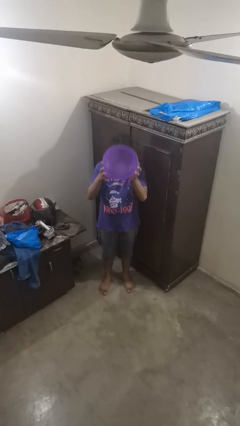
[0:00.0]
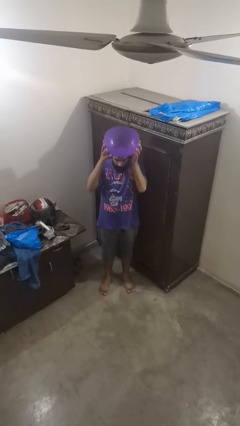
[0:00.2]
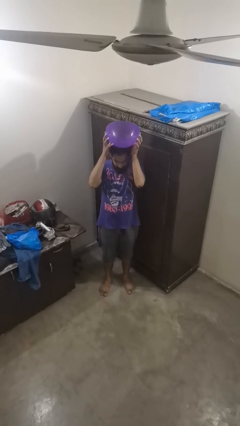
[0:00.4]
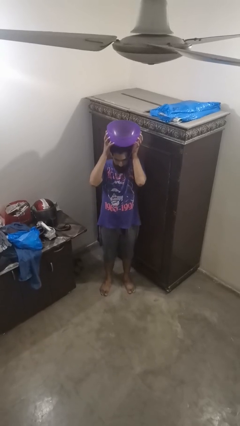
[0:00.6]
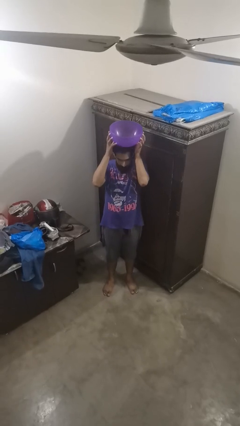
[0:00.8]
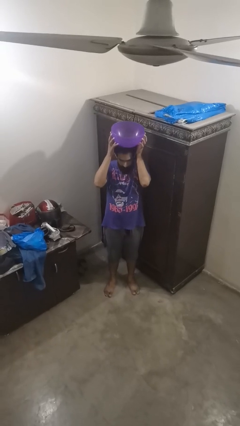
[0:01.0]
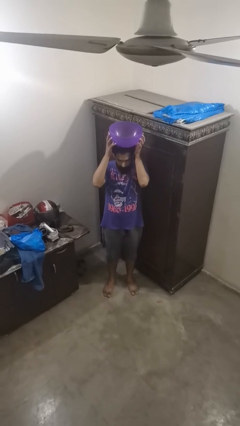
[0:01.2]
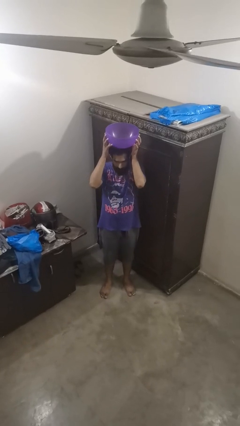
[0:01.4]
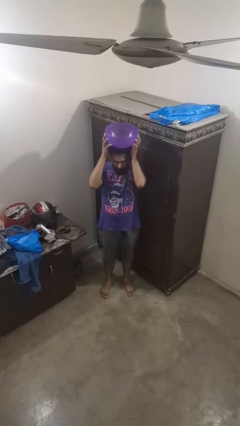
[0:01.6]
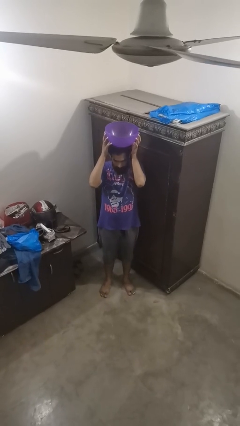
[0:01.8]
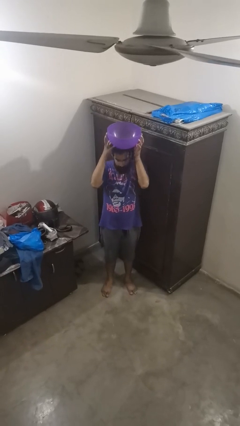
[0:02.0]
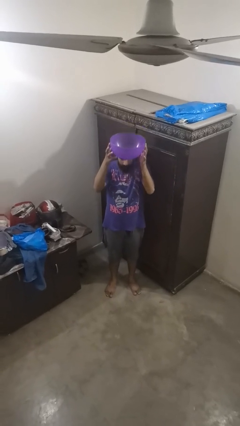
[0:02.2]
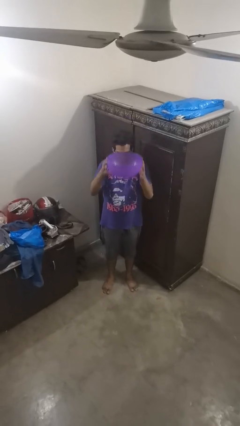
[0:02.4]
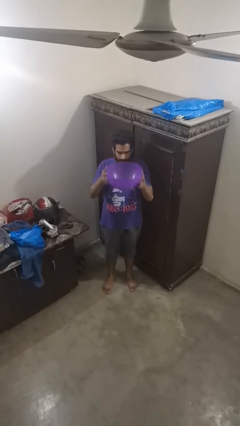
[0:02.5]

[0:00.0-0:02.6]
person holds object above head

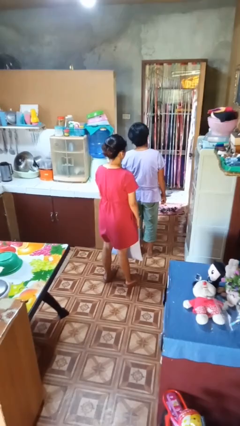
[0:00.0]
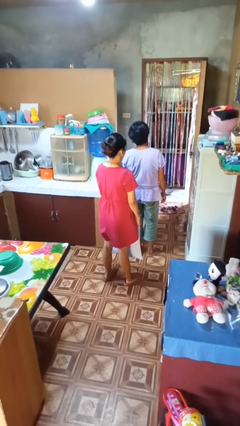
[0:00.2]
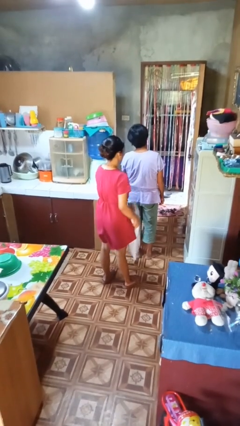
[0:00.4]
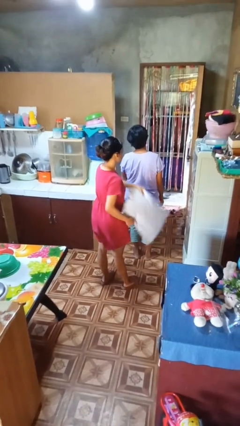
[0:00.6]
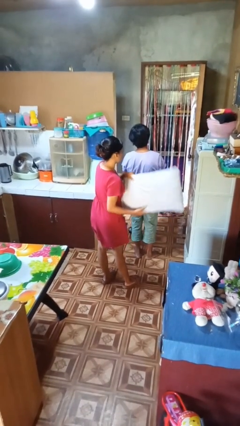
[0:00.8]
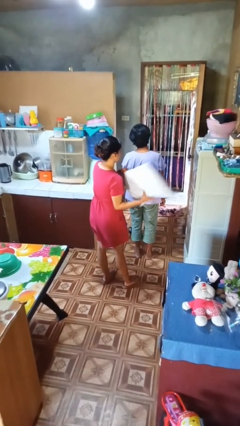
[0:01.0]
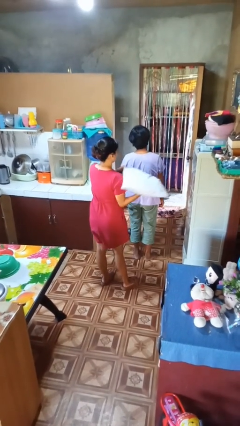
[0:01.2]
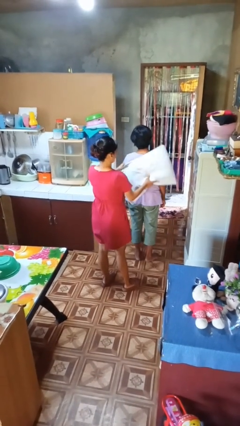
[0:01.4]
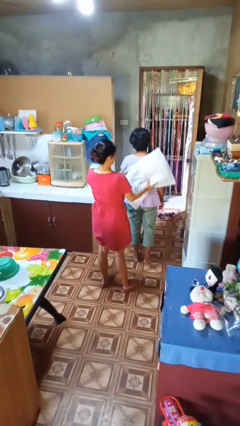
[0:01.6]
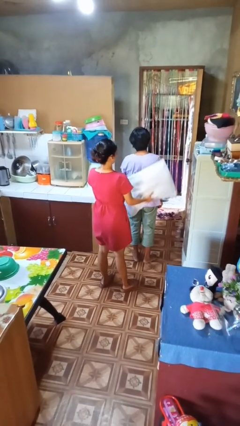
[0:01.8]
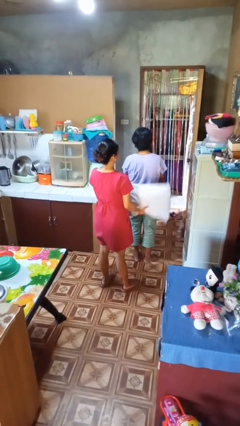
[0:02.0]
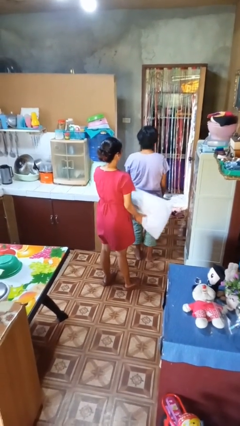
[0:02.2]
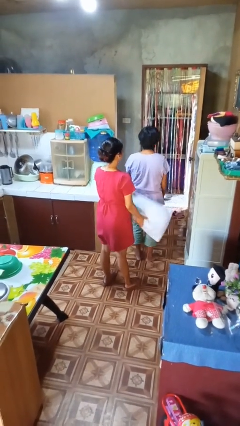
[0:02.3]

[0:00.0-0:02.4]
person hits person with pillow

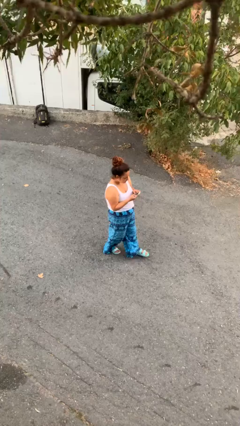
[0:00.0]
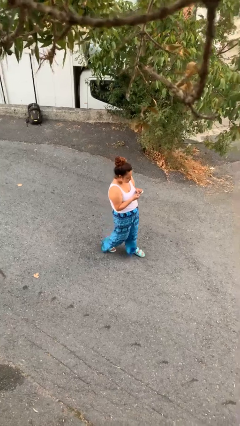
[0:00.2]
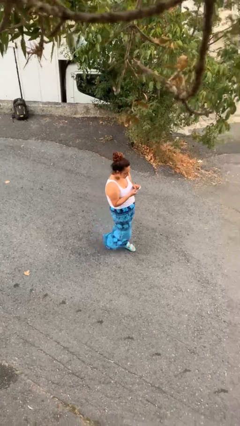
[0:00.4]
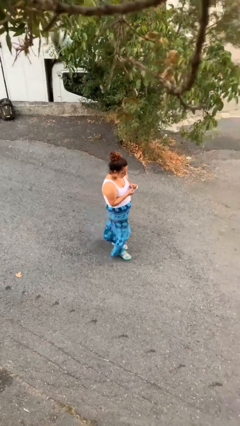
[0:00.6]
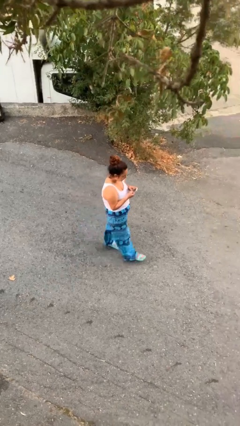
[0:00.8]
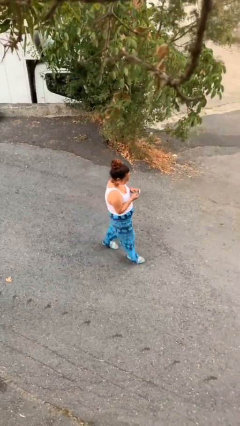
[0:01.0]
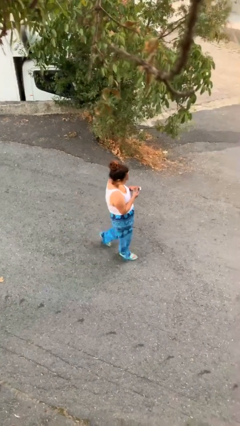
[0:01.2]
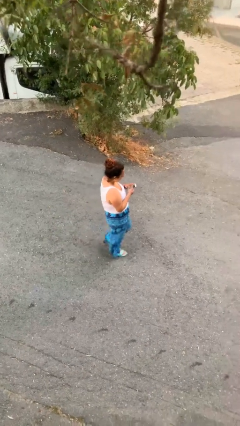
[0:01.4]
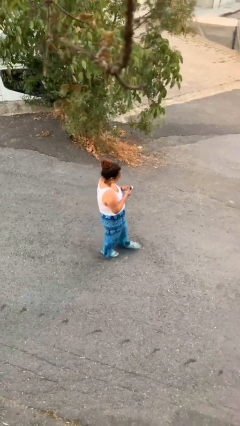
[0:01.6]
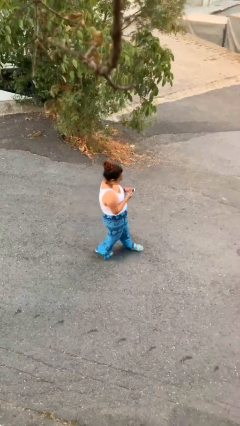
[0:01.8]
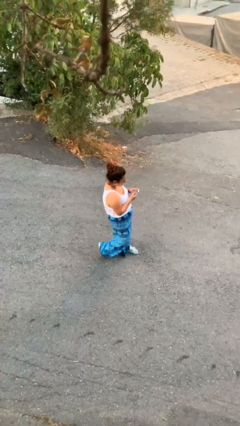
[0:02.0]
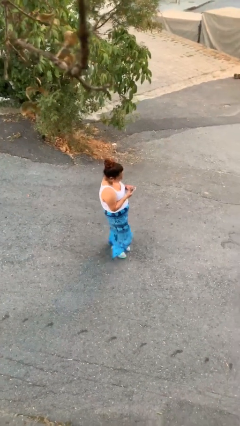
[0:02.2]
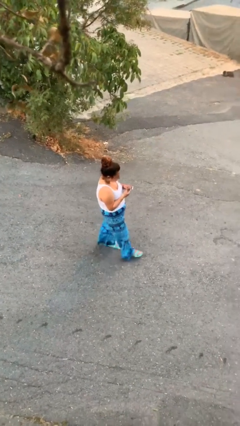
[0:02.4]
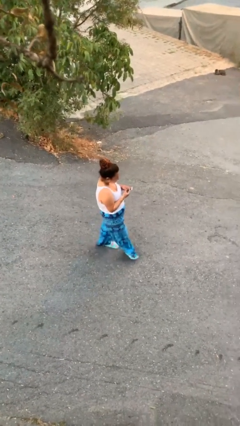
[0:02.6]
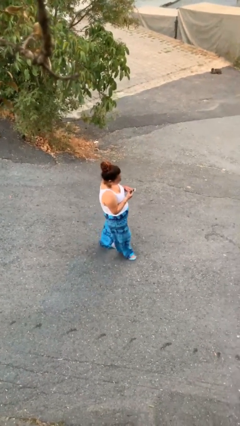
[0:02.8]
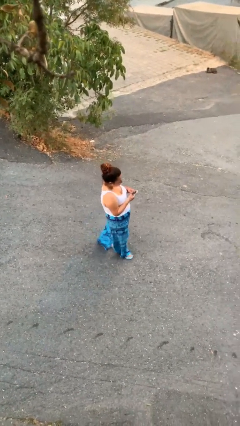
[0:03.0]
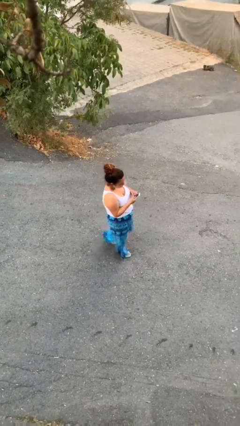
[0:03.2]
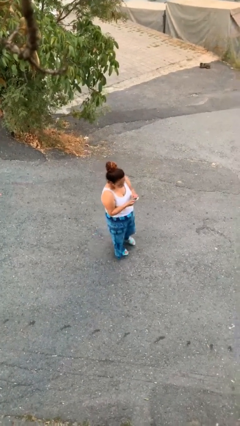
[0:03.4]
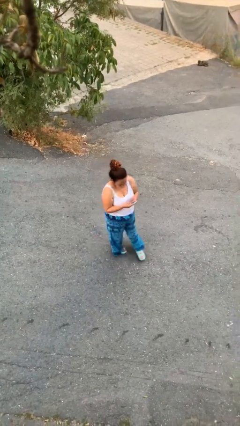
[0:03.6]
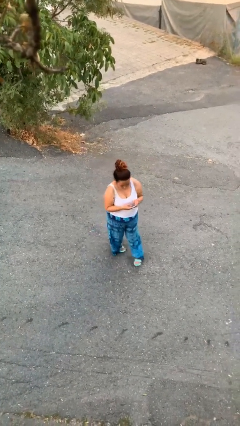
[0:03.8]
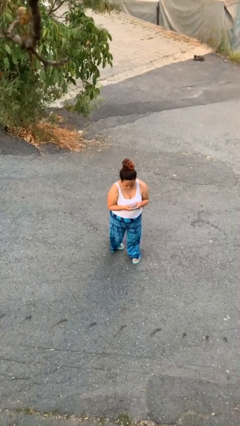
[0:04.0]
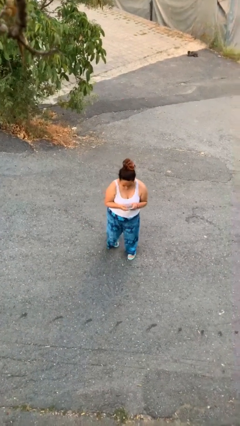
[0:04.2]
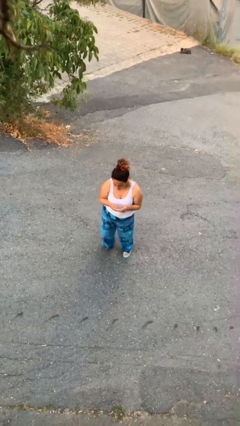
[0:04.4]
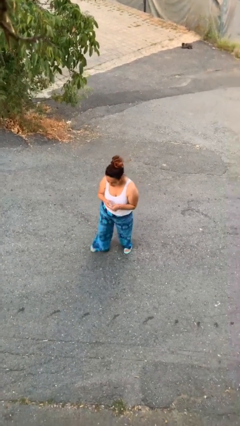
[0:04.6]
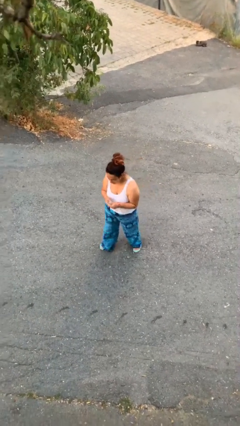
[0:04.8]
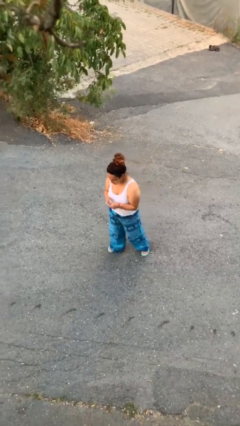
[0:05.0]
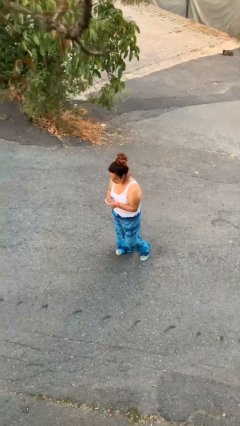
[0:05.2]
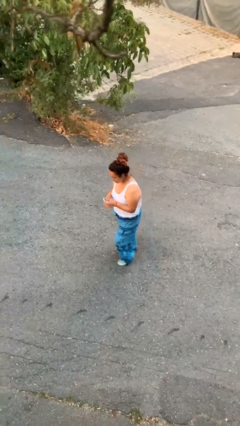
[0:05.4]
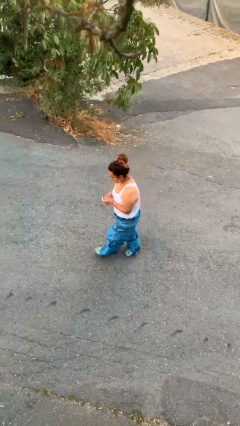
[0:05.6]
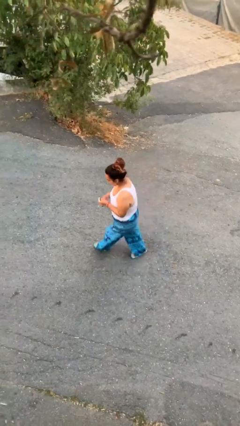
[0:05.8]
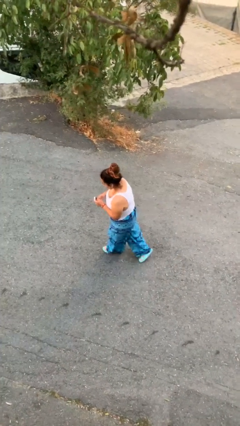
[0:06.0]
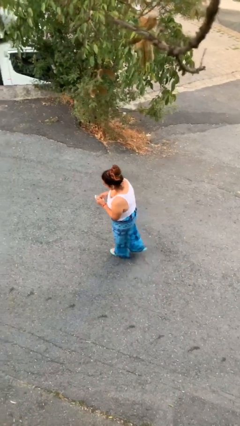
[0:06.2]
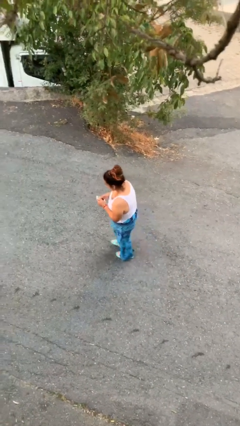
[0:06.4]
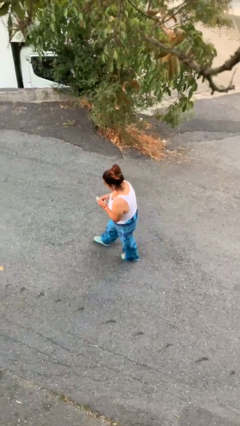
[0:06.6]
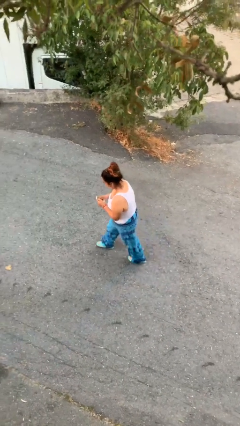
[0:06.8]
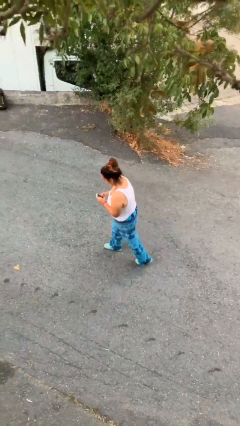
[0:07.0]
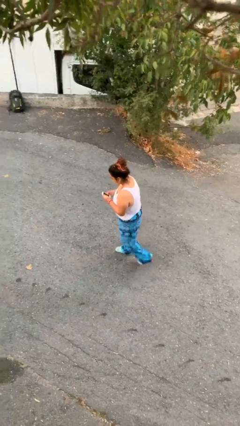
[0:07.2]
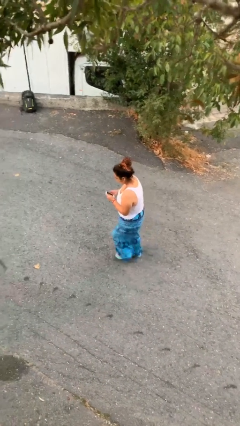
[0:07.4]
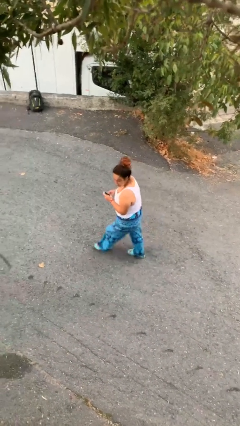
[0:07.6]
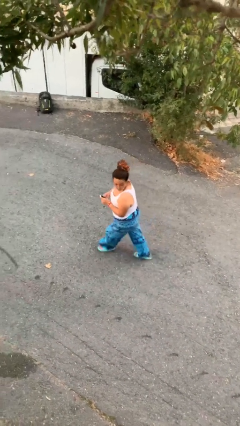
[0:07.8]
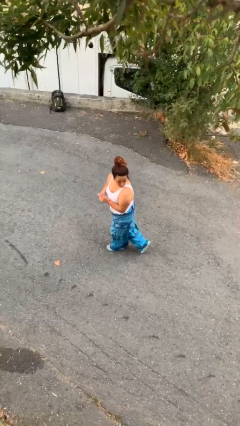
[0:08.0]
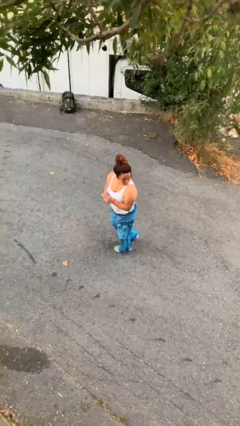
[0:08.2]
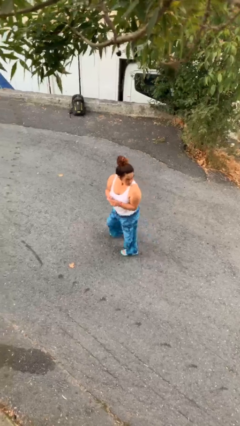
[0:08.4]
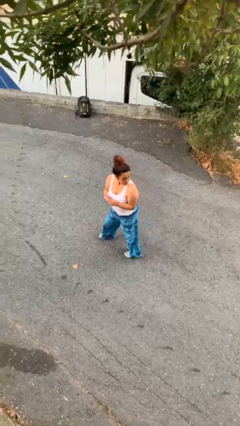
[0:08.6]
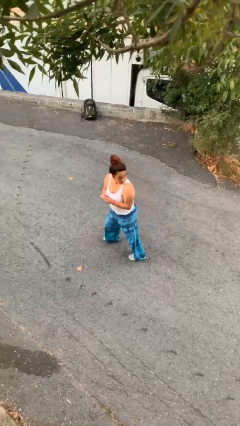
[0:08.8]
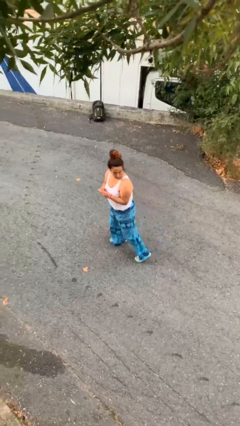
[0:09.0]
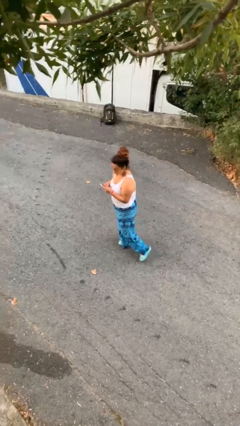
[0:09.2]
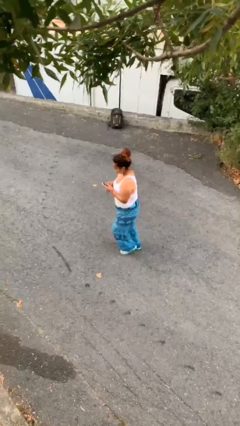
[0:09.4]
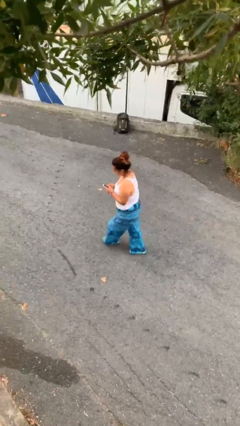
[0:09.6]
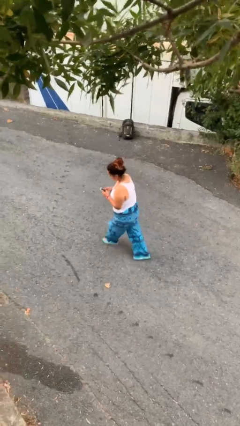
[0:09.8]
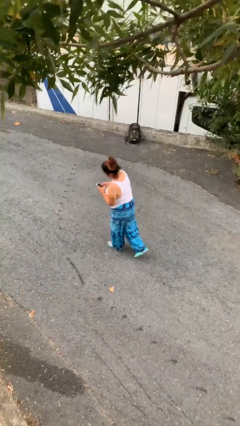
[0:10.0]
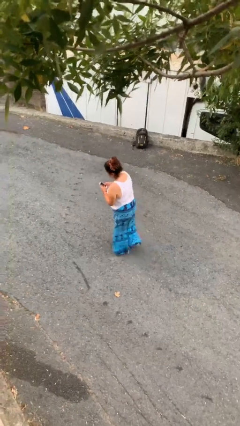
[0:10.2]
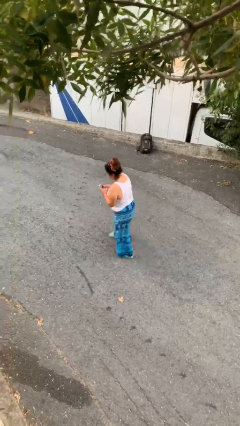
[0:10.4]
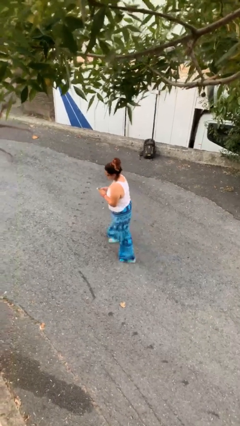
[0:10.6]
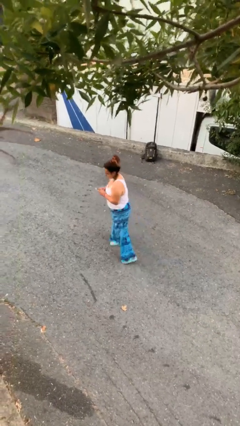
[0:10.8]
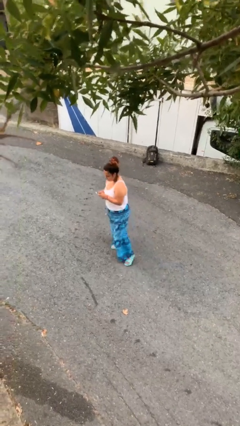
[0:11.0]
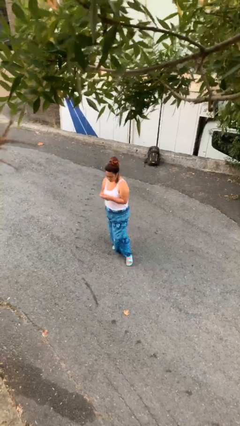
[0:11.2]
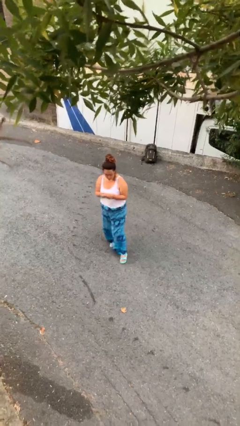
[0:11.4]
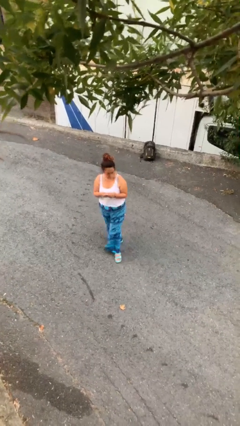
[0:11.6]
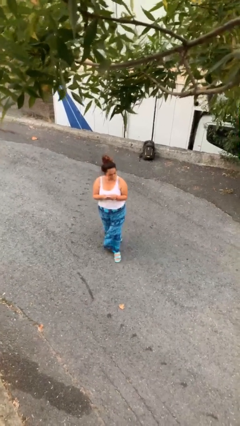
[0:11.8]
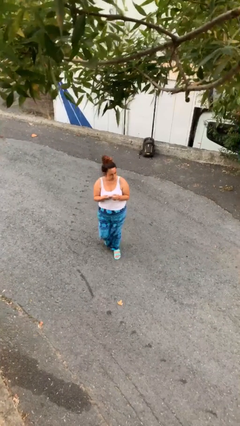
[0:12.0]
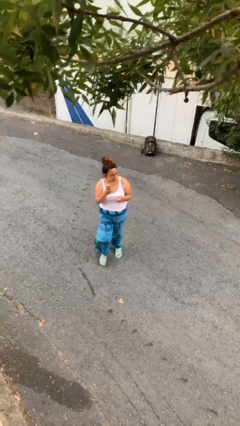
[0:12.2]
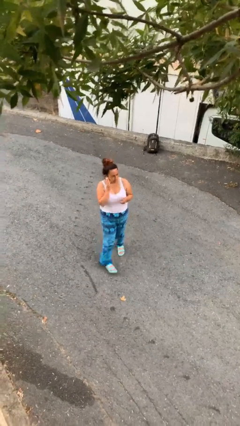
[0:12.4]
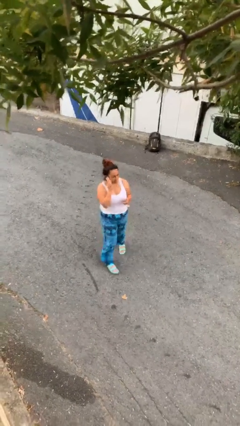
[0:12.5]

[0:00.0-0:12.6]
person texts on phone

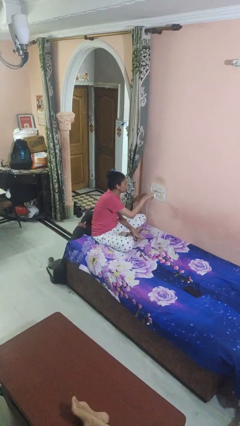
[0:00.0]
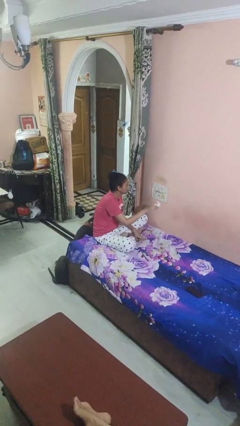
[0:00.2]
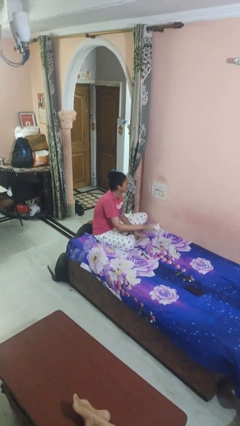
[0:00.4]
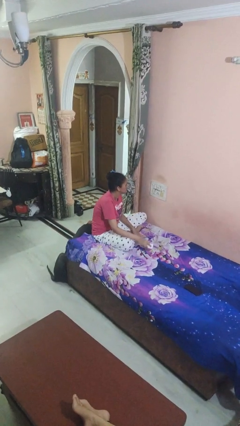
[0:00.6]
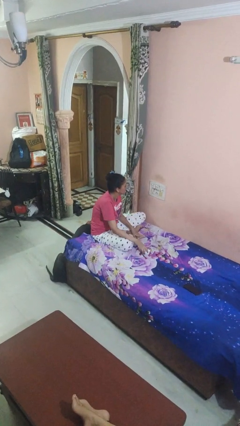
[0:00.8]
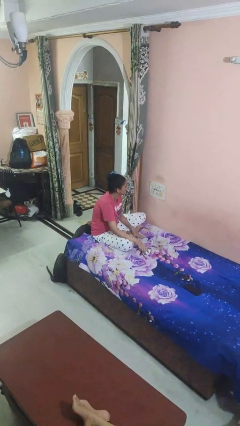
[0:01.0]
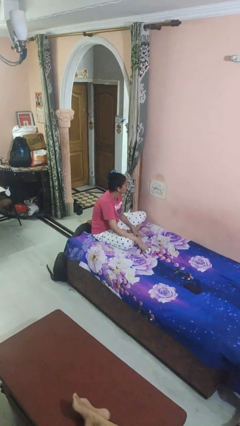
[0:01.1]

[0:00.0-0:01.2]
person unplugs from electrical socket
